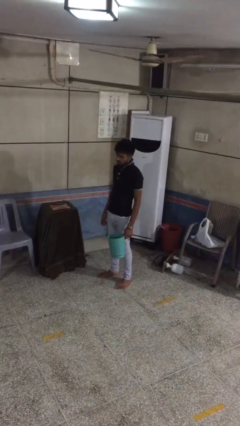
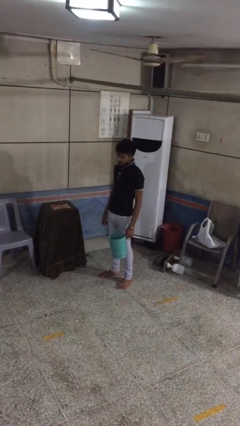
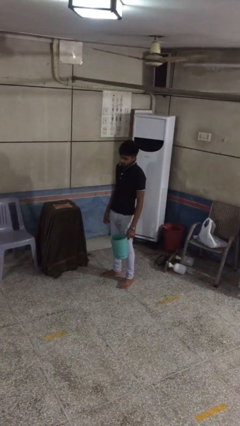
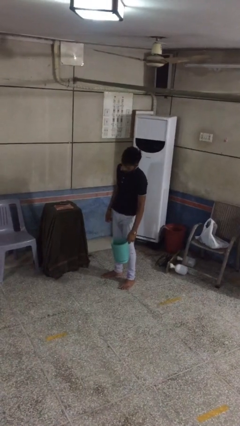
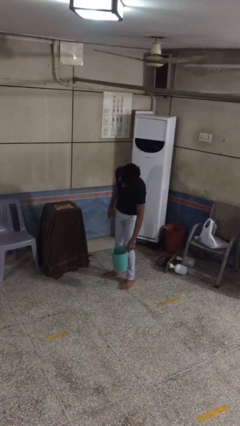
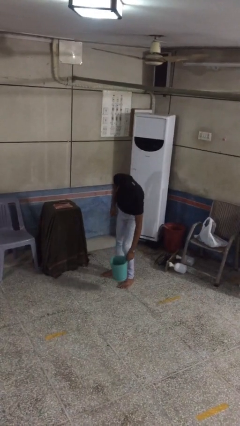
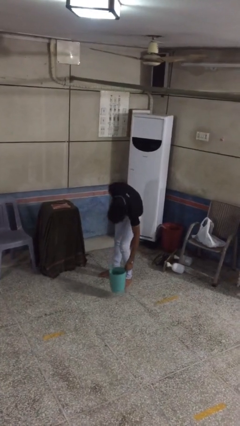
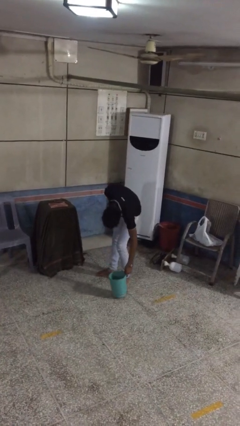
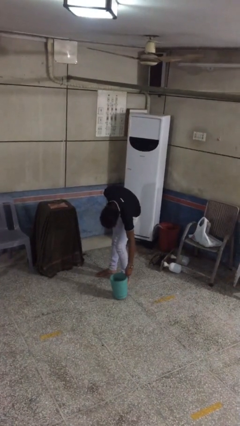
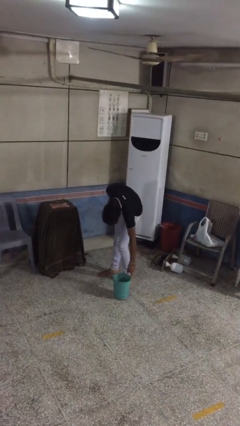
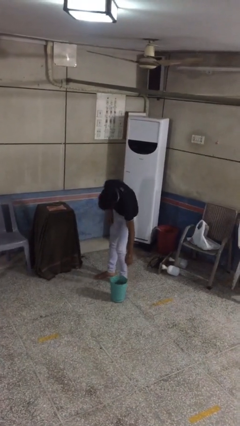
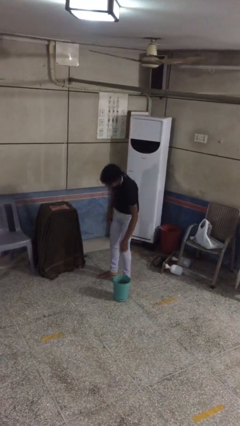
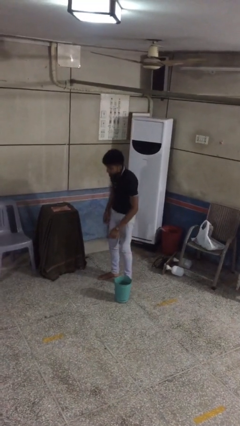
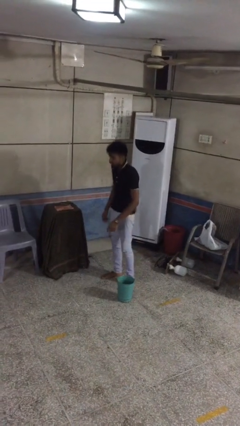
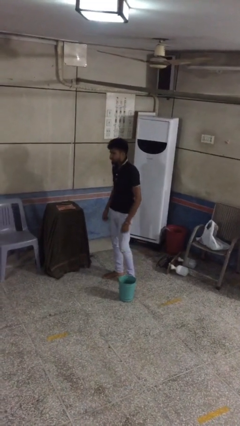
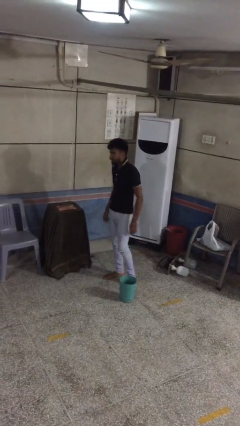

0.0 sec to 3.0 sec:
person puts down object on floor

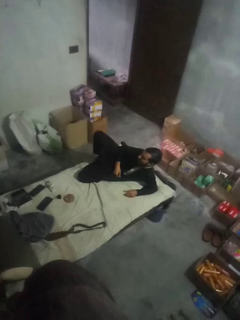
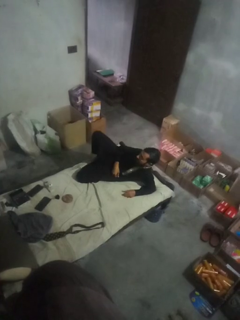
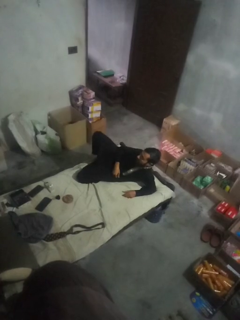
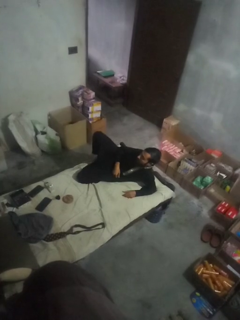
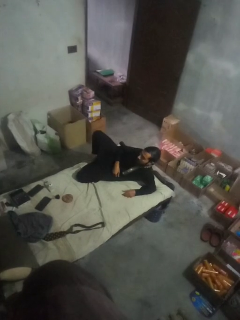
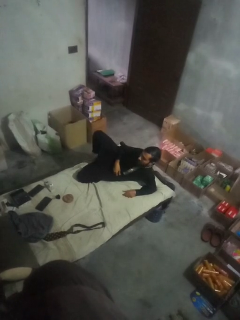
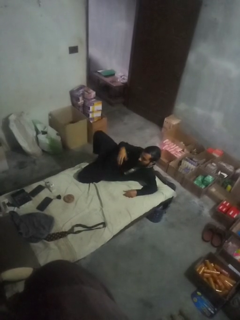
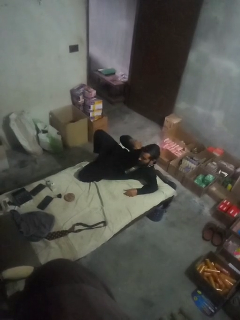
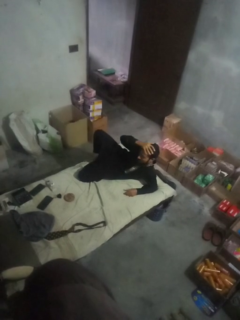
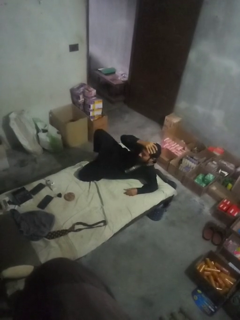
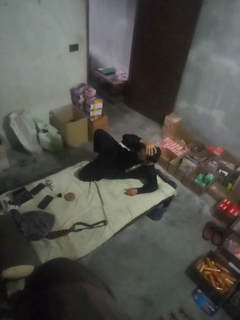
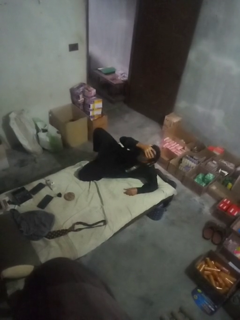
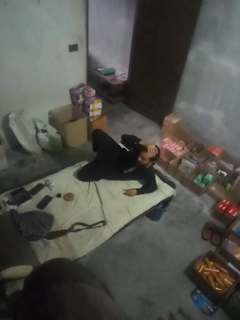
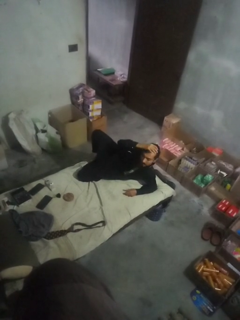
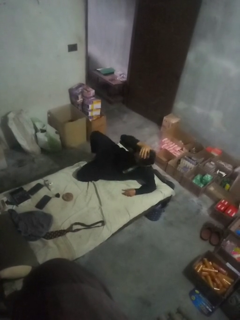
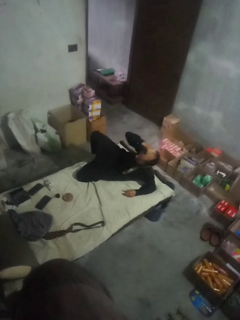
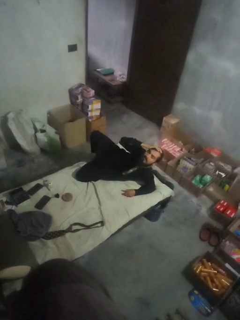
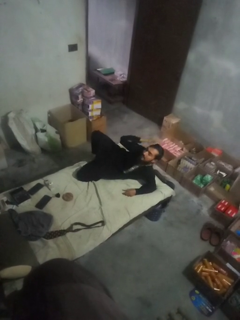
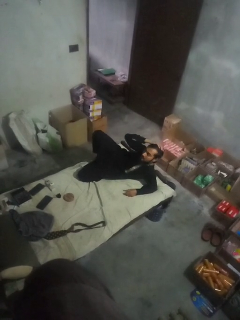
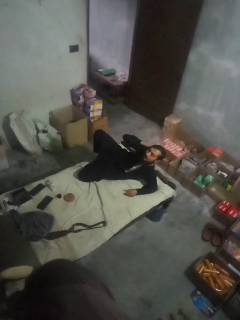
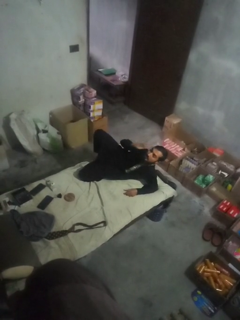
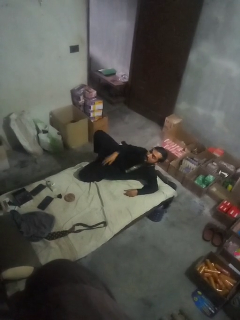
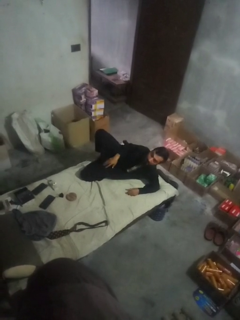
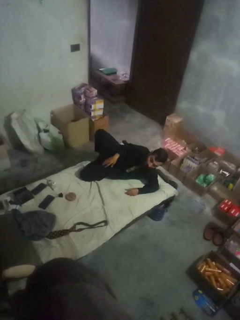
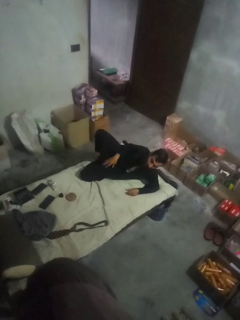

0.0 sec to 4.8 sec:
person pats head

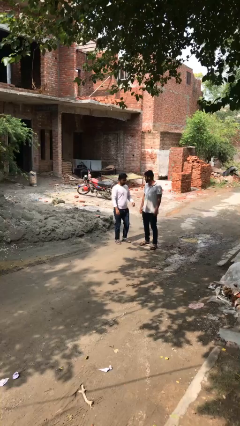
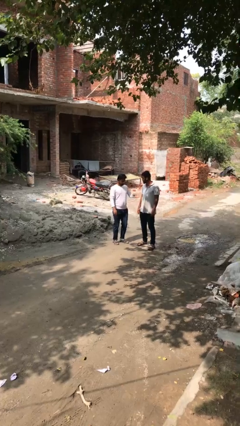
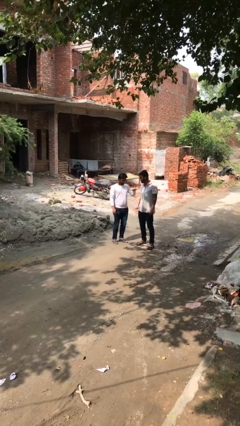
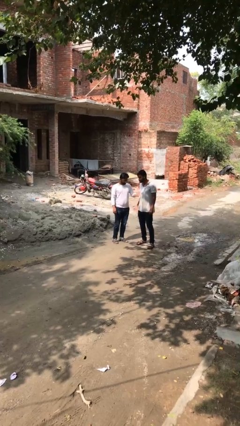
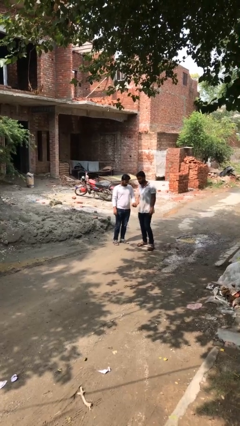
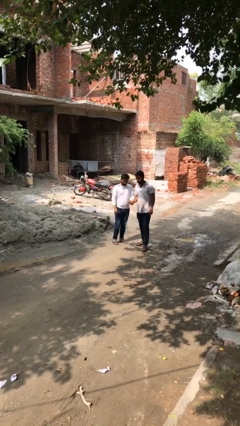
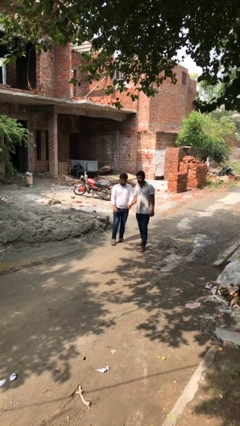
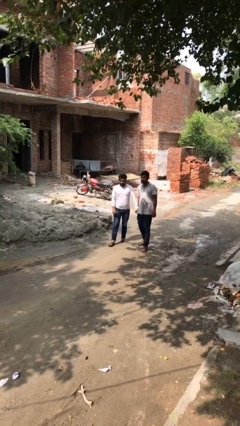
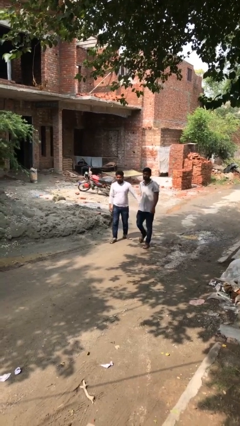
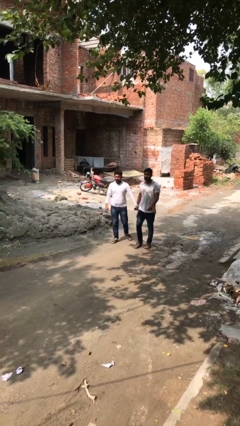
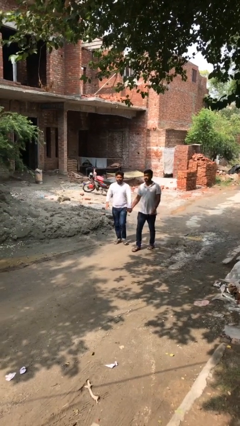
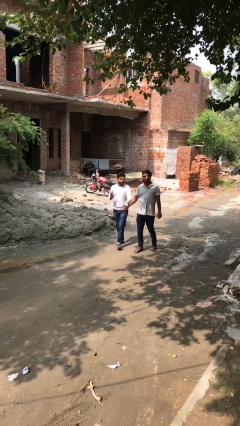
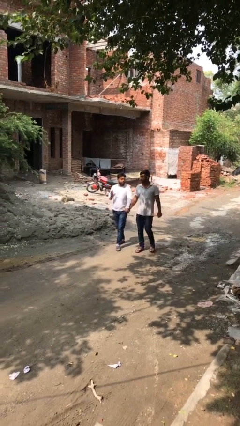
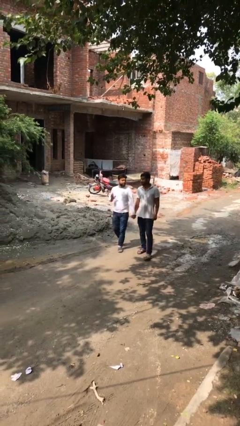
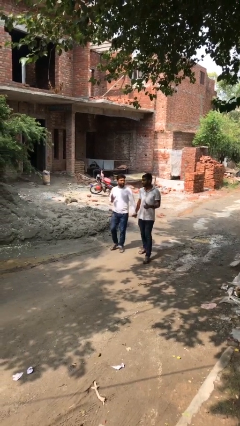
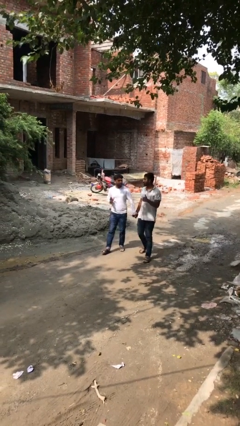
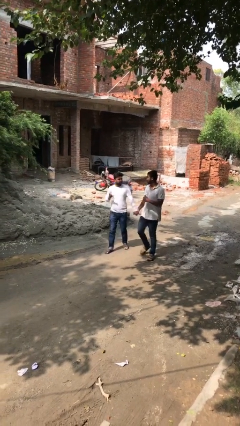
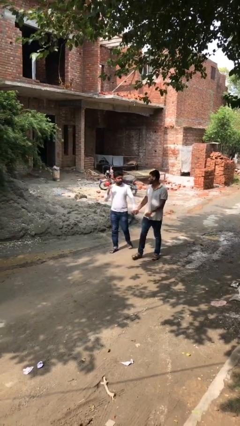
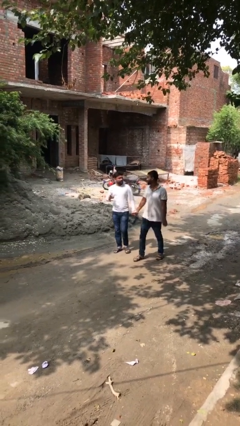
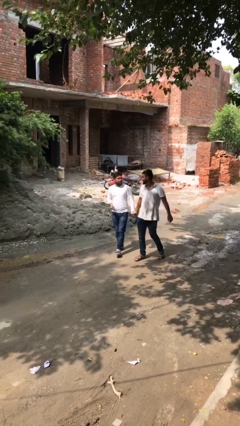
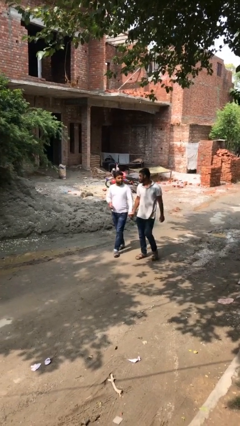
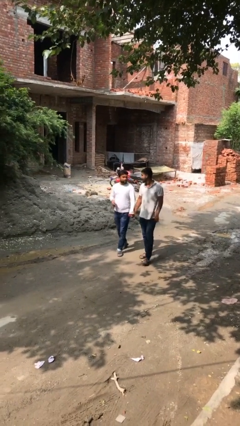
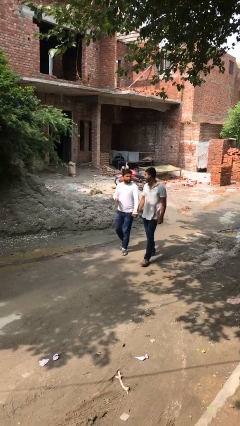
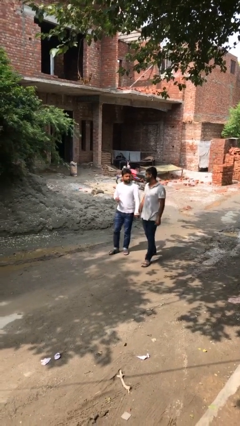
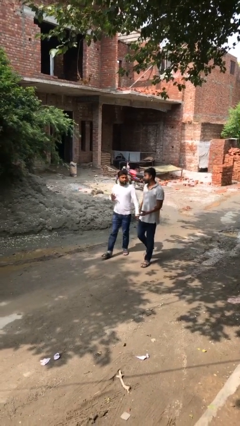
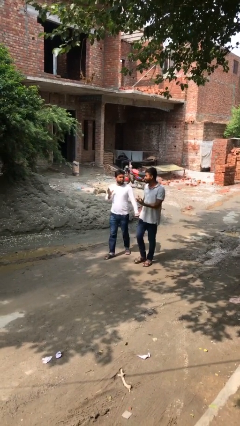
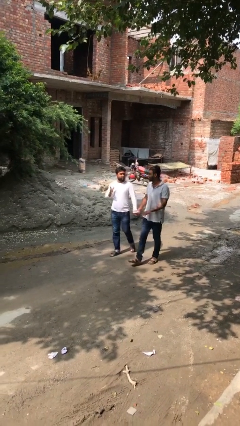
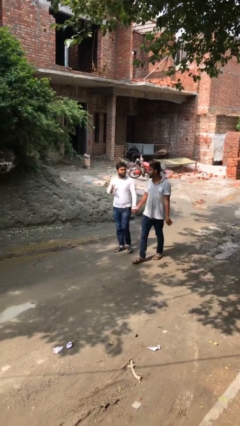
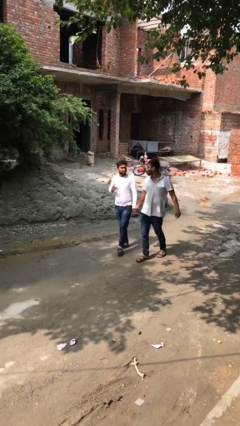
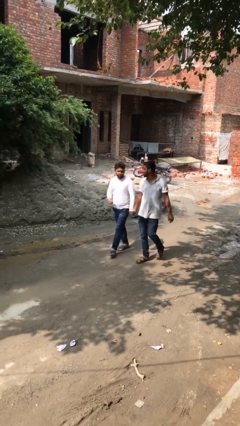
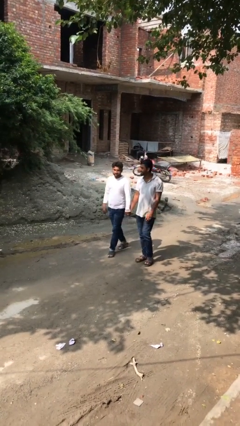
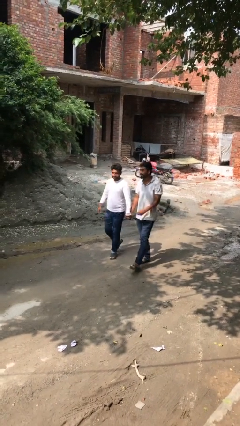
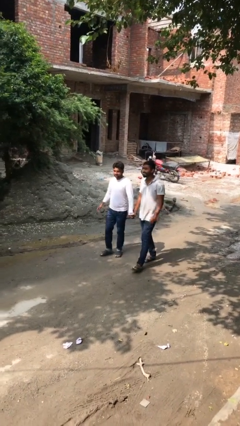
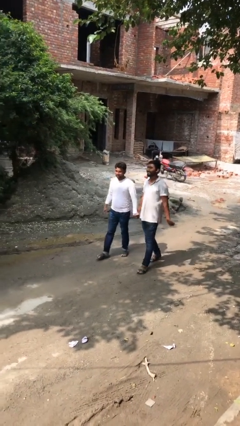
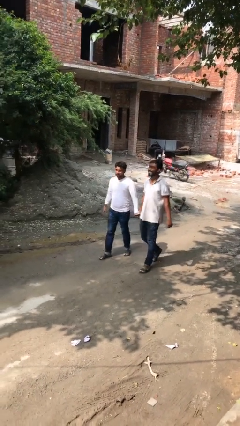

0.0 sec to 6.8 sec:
person holds hand

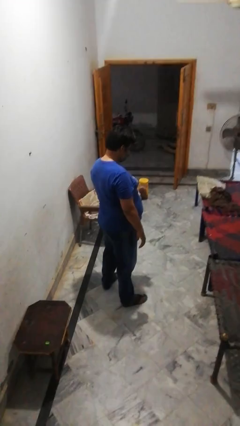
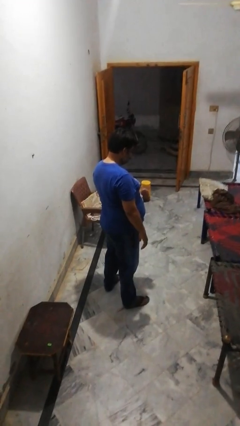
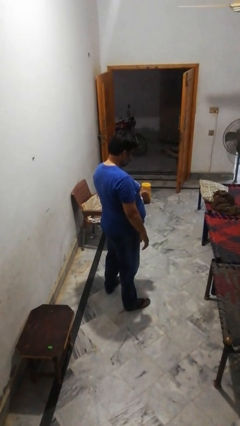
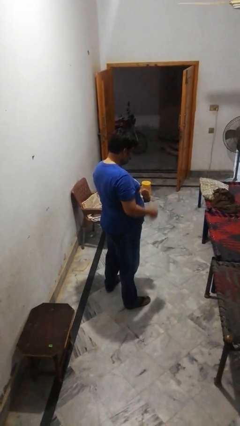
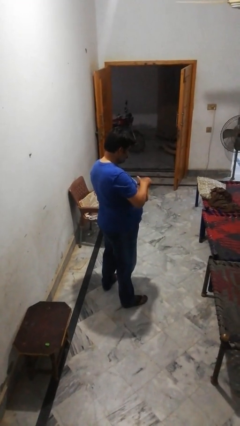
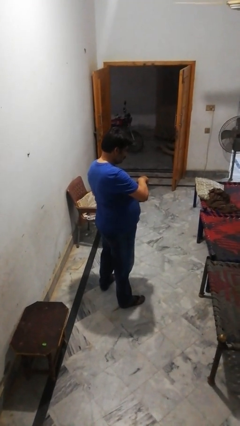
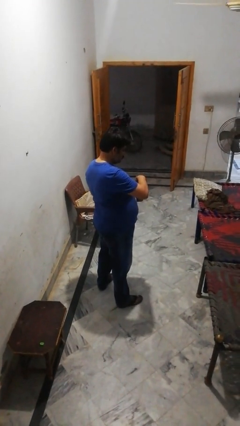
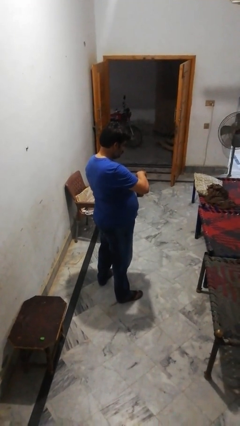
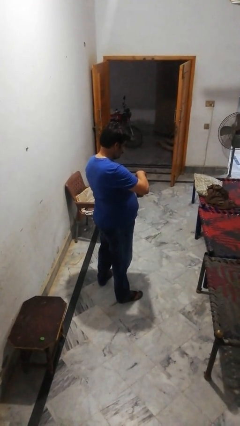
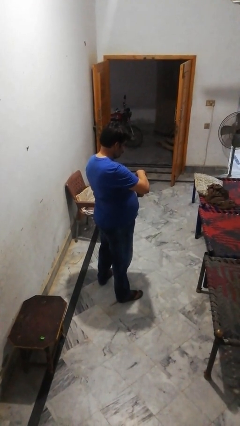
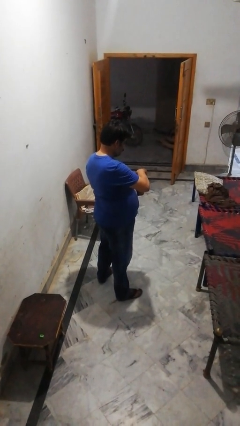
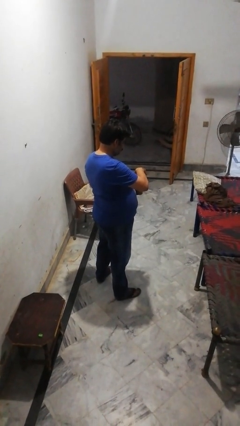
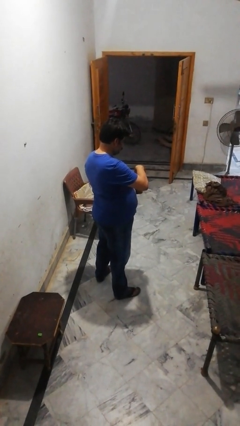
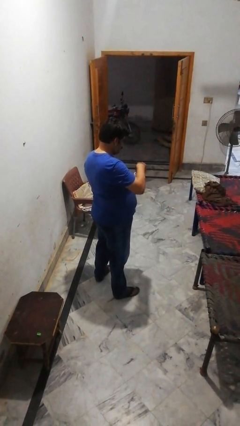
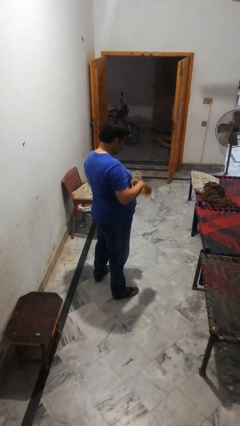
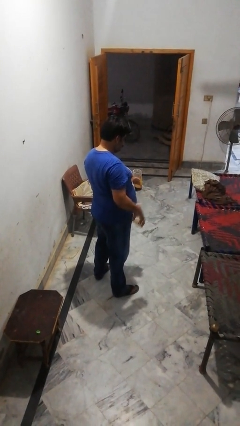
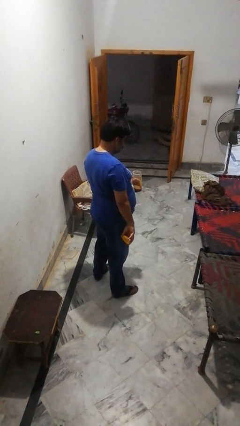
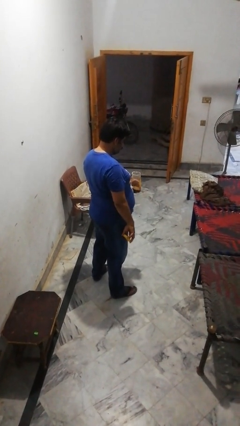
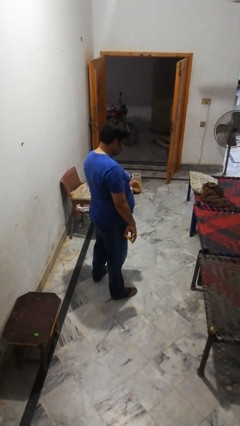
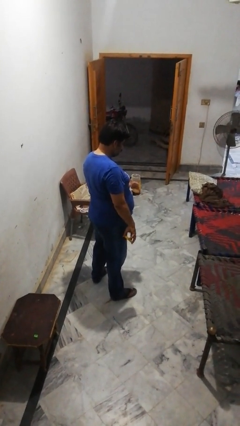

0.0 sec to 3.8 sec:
person opens jar

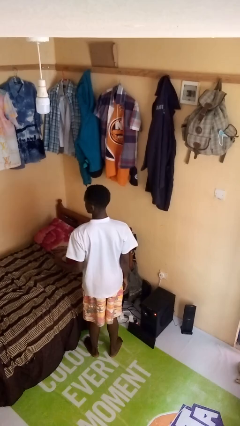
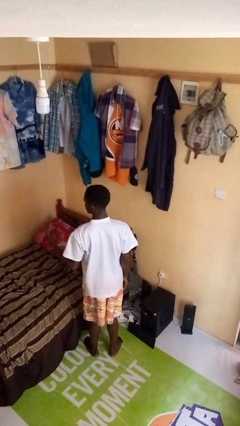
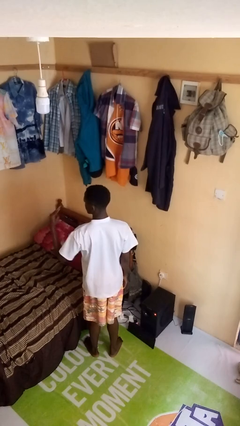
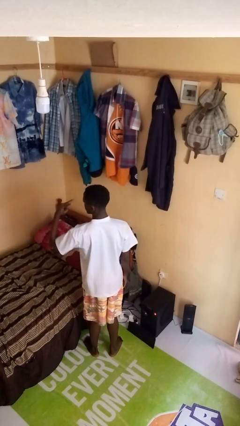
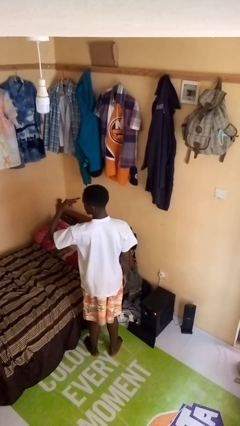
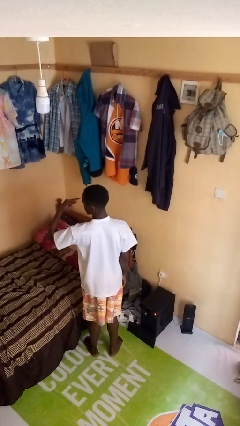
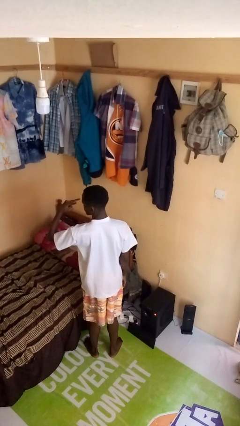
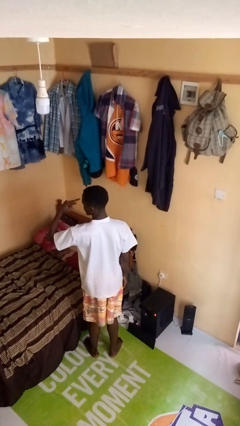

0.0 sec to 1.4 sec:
person gestures watch closely
